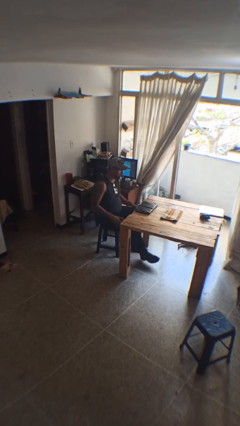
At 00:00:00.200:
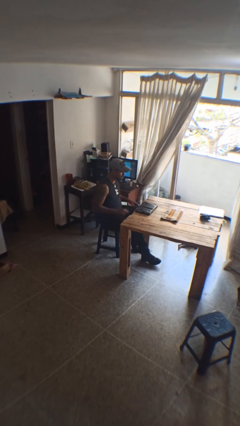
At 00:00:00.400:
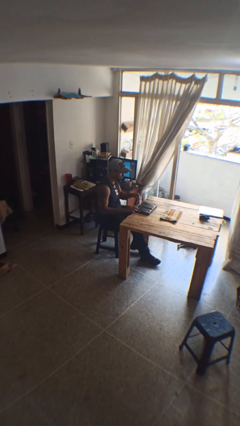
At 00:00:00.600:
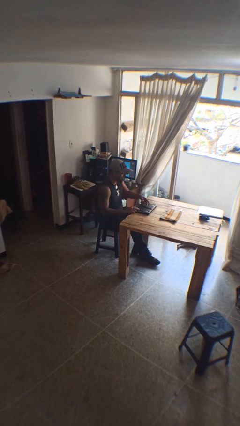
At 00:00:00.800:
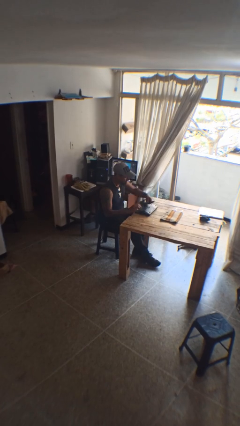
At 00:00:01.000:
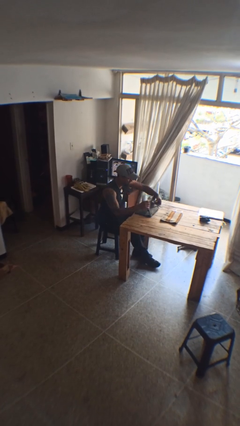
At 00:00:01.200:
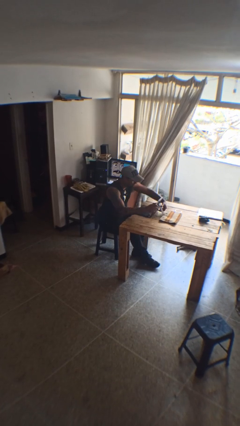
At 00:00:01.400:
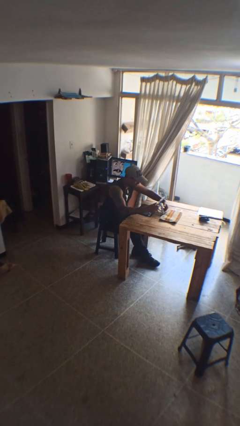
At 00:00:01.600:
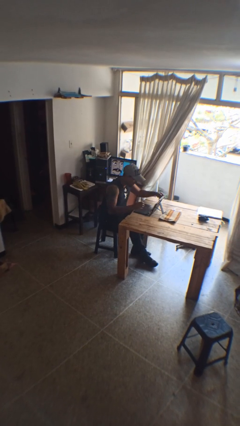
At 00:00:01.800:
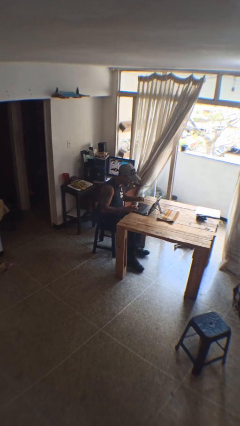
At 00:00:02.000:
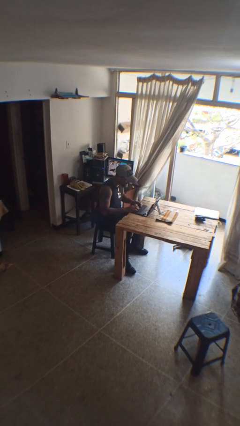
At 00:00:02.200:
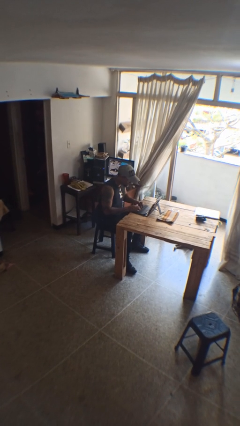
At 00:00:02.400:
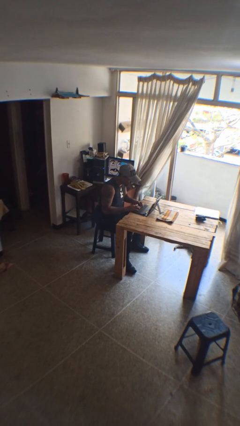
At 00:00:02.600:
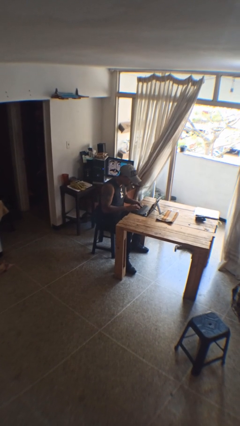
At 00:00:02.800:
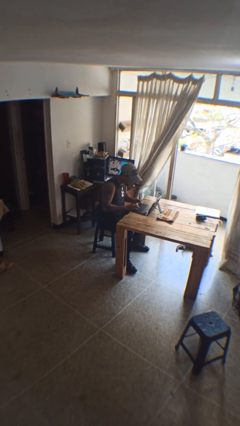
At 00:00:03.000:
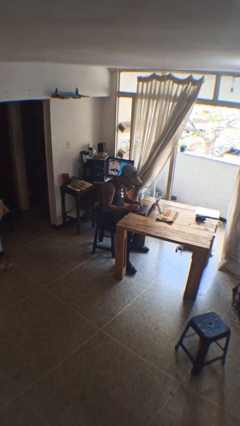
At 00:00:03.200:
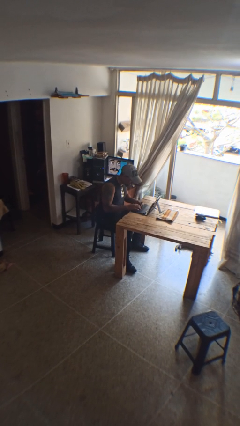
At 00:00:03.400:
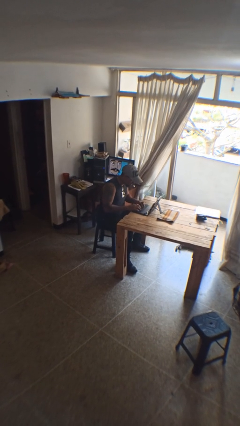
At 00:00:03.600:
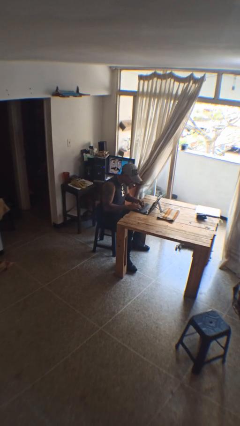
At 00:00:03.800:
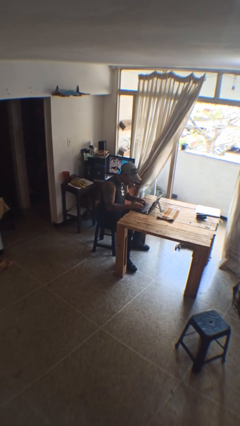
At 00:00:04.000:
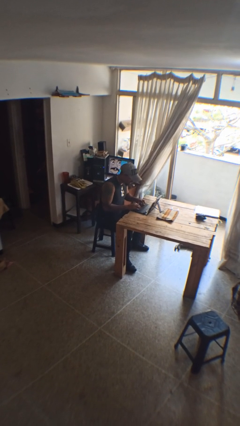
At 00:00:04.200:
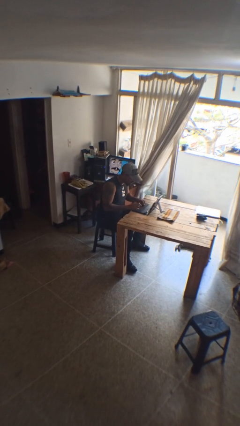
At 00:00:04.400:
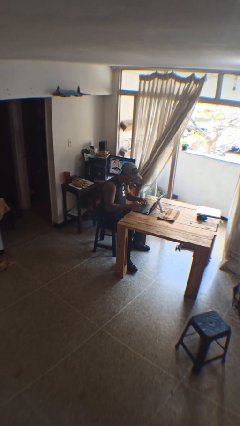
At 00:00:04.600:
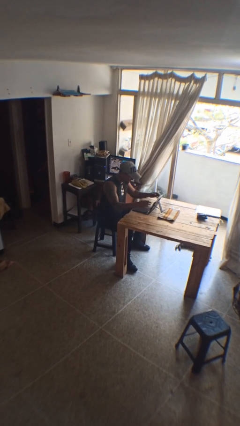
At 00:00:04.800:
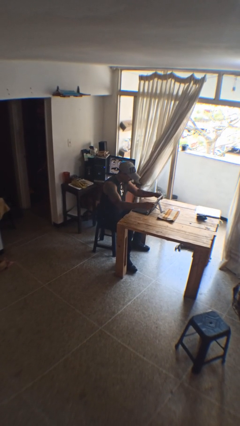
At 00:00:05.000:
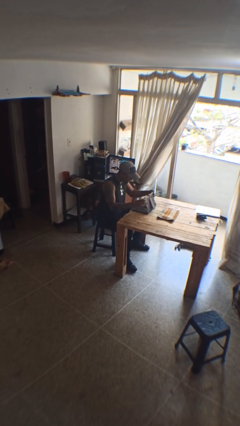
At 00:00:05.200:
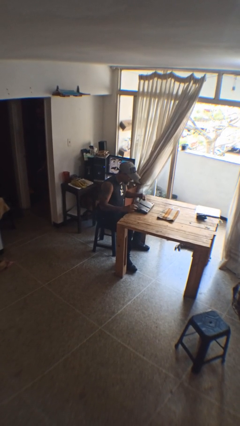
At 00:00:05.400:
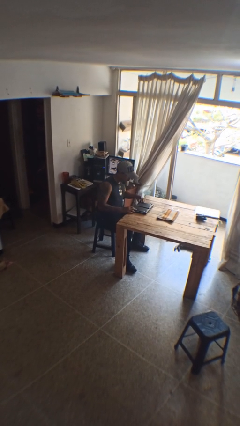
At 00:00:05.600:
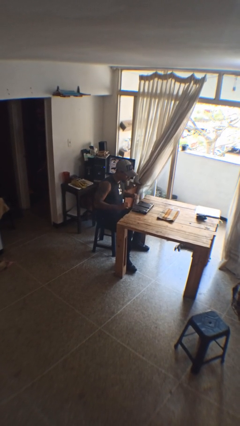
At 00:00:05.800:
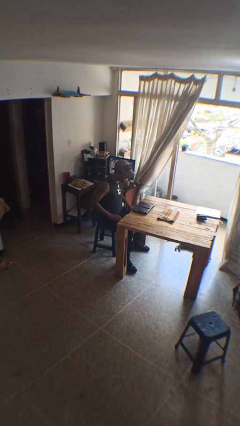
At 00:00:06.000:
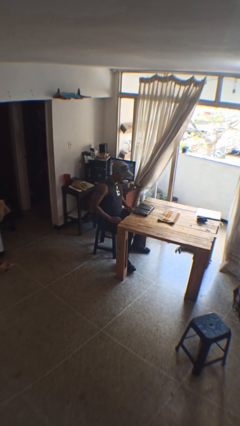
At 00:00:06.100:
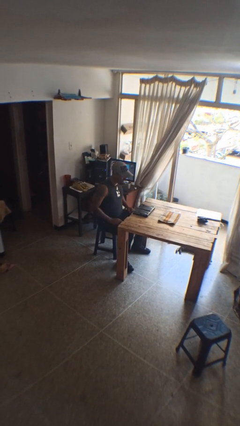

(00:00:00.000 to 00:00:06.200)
person interacts with laptop

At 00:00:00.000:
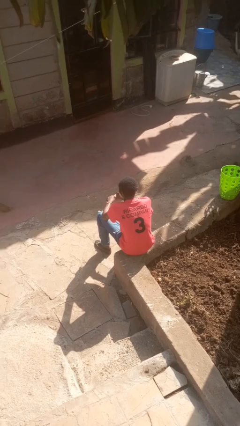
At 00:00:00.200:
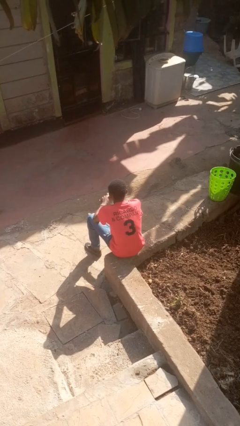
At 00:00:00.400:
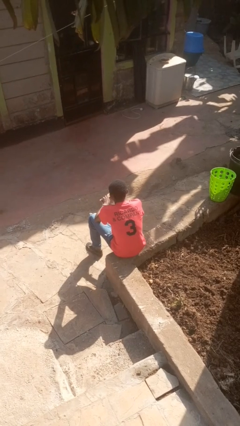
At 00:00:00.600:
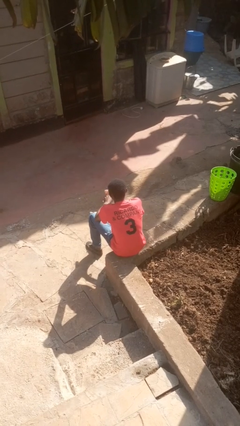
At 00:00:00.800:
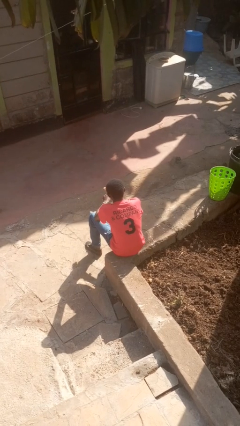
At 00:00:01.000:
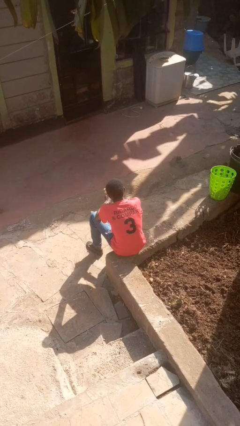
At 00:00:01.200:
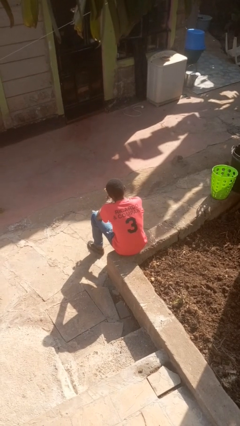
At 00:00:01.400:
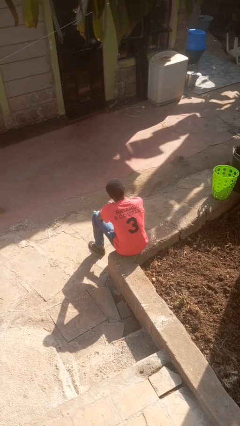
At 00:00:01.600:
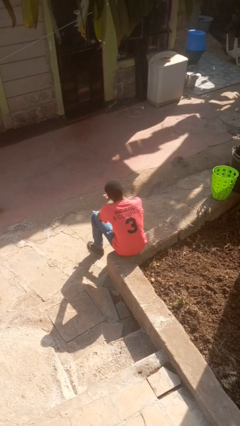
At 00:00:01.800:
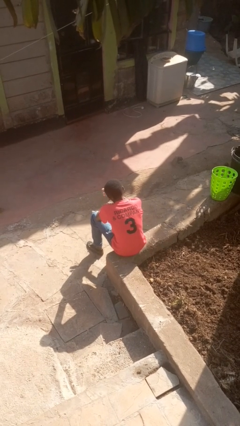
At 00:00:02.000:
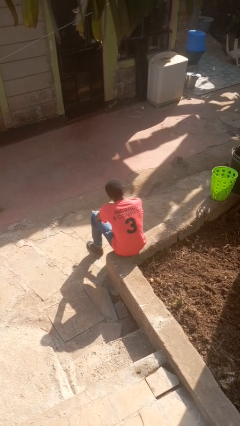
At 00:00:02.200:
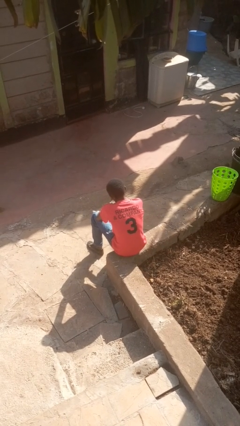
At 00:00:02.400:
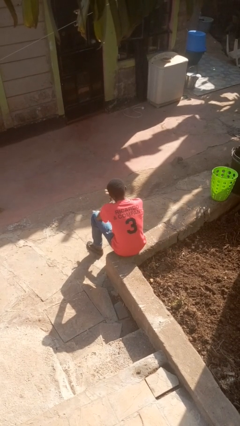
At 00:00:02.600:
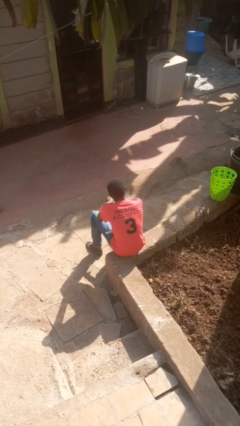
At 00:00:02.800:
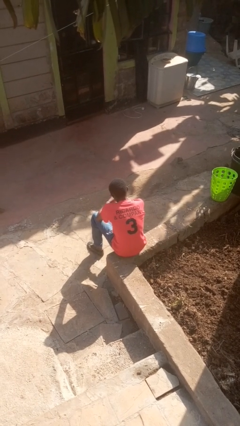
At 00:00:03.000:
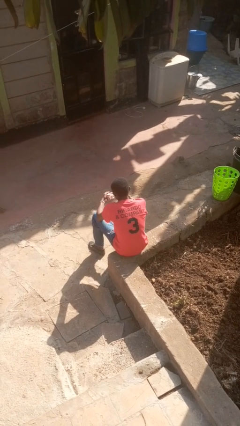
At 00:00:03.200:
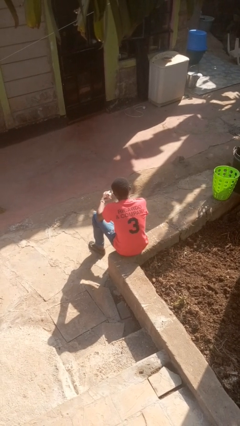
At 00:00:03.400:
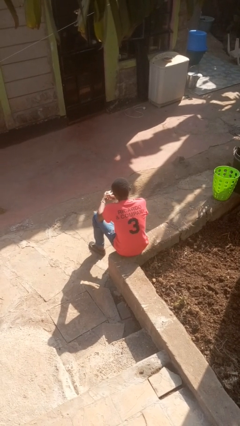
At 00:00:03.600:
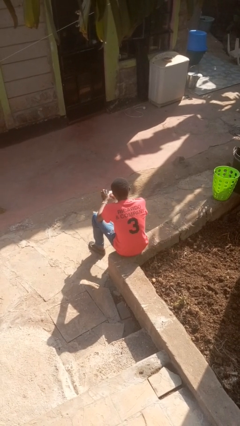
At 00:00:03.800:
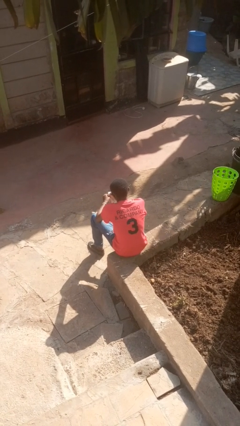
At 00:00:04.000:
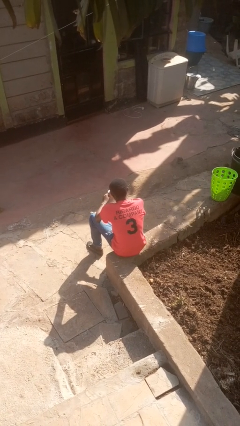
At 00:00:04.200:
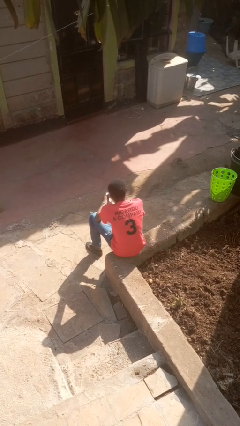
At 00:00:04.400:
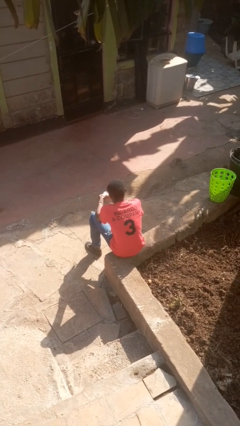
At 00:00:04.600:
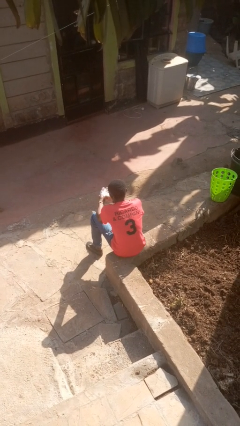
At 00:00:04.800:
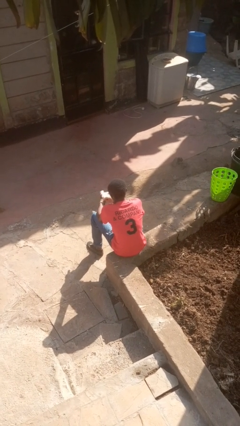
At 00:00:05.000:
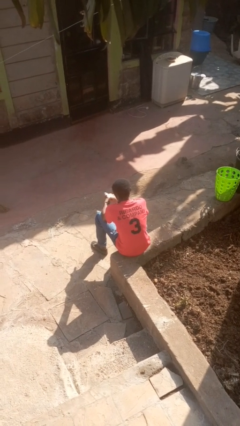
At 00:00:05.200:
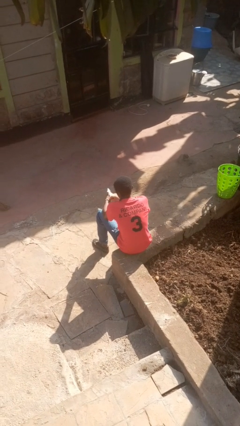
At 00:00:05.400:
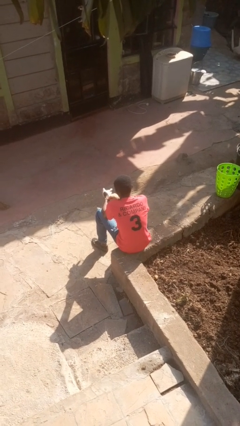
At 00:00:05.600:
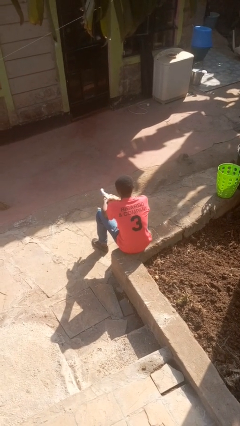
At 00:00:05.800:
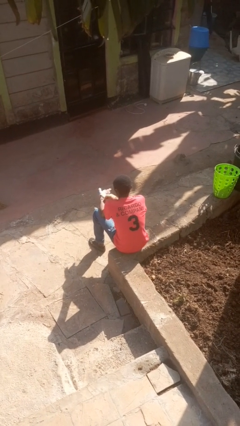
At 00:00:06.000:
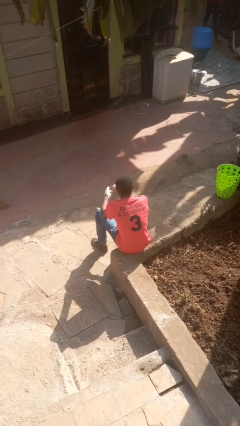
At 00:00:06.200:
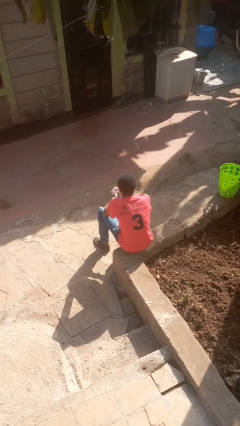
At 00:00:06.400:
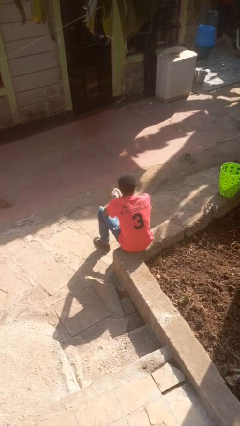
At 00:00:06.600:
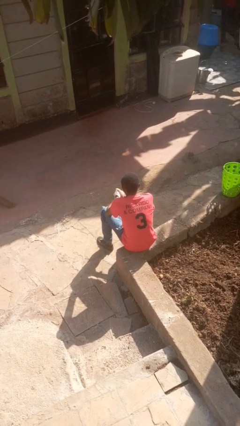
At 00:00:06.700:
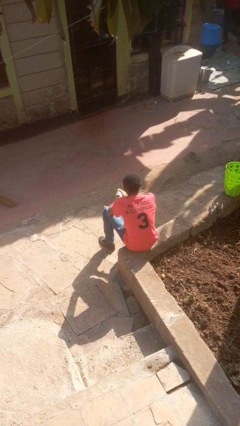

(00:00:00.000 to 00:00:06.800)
person puts on gloves

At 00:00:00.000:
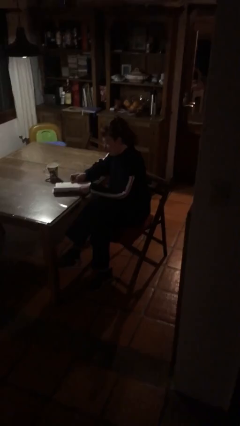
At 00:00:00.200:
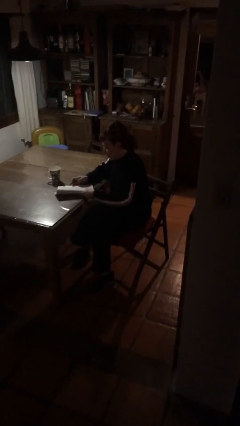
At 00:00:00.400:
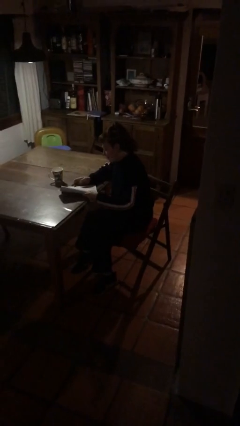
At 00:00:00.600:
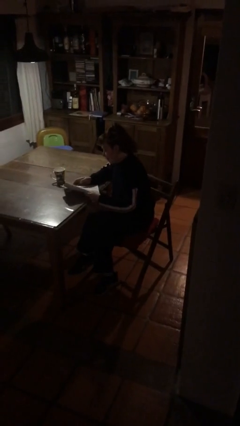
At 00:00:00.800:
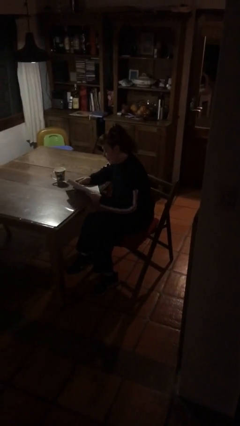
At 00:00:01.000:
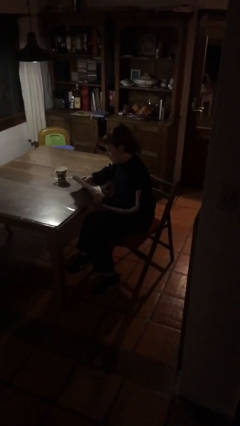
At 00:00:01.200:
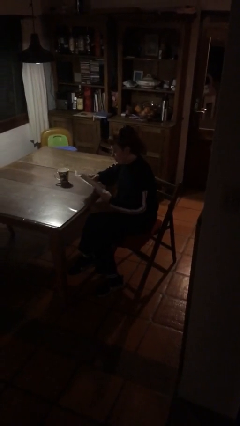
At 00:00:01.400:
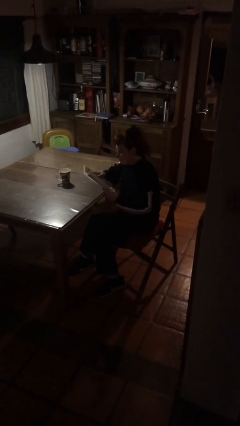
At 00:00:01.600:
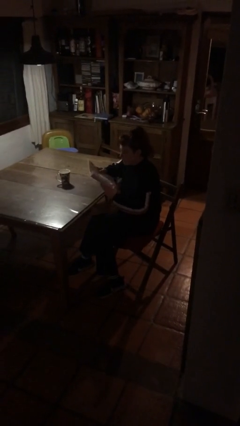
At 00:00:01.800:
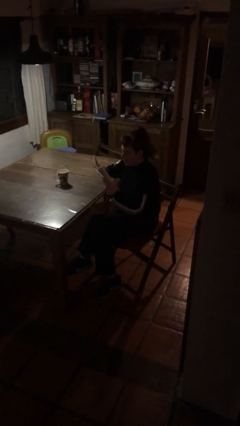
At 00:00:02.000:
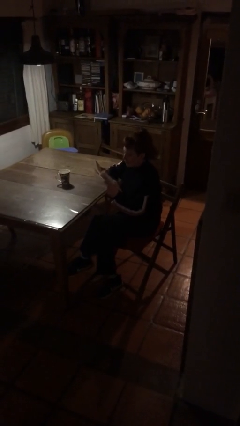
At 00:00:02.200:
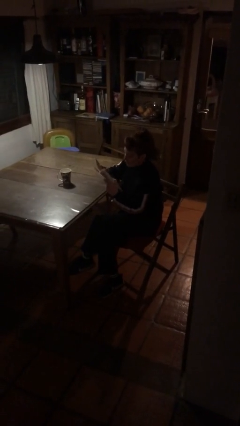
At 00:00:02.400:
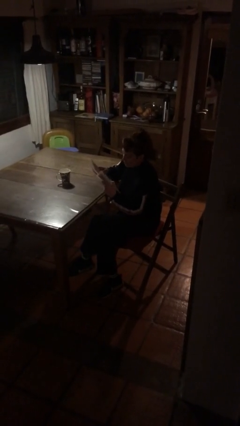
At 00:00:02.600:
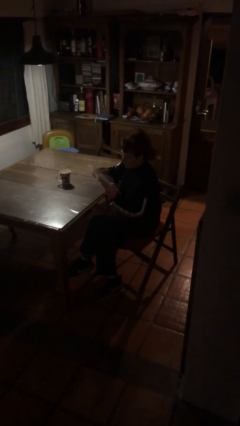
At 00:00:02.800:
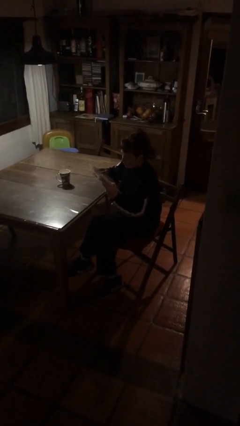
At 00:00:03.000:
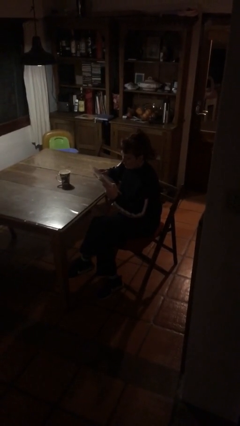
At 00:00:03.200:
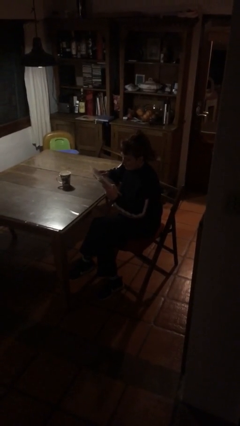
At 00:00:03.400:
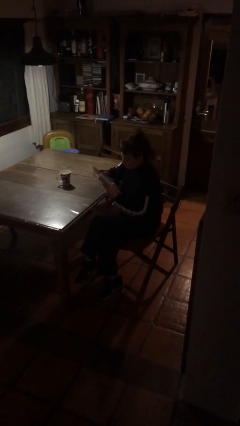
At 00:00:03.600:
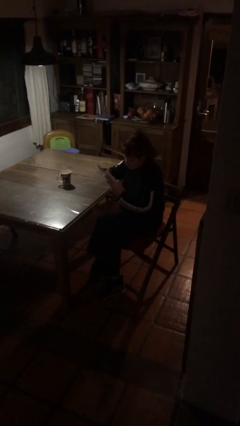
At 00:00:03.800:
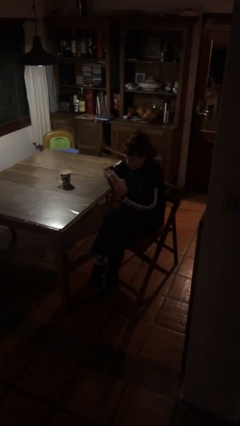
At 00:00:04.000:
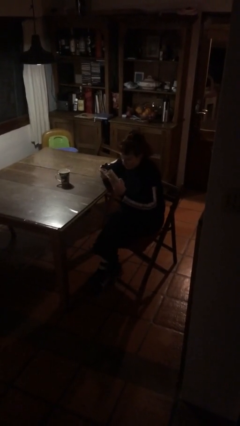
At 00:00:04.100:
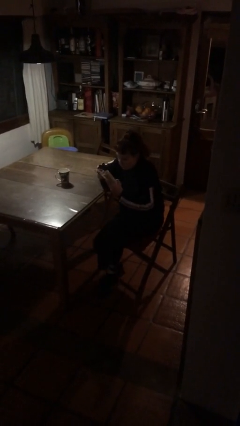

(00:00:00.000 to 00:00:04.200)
person reads document

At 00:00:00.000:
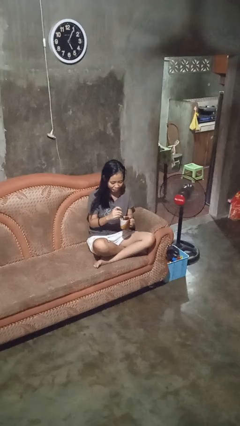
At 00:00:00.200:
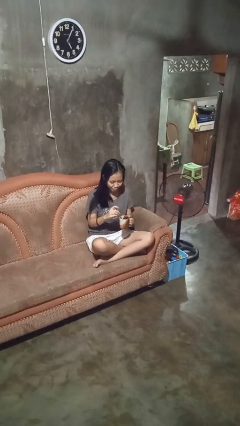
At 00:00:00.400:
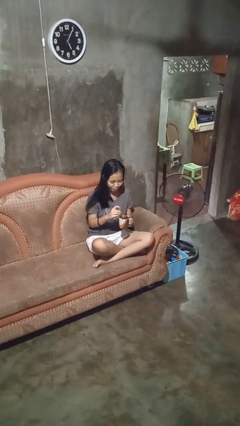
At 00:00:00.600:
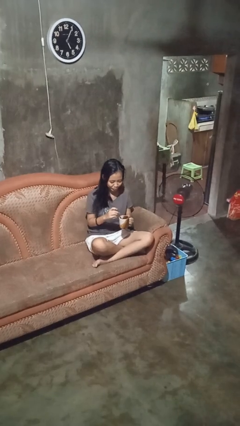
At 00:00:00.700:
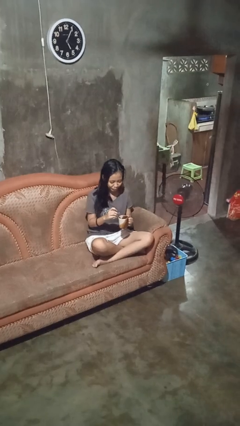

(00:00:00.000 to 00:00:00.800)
person stirs mug
